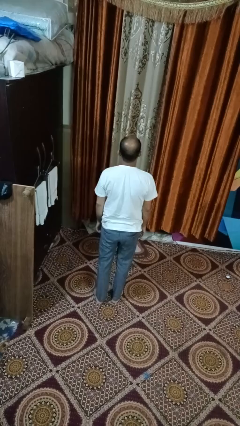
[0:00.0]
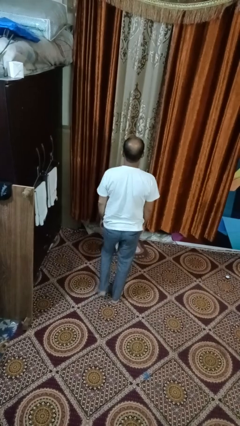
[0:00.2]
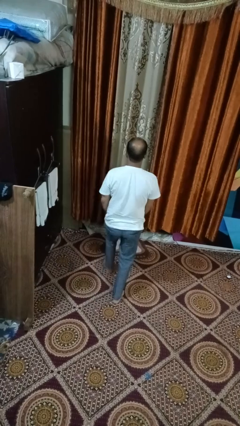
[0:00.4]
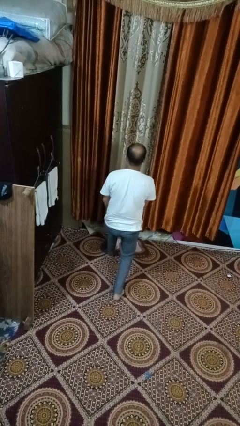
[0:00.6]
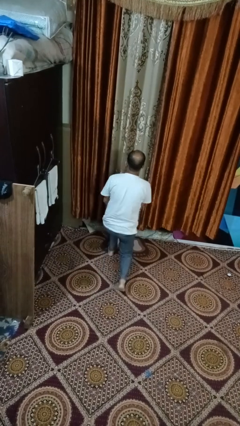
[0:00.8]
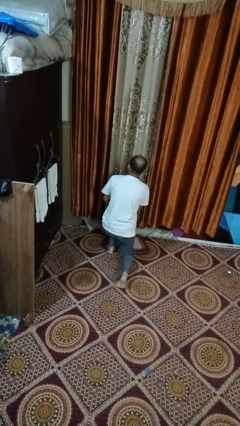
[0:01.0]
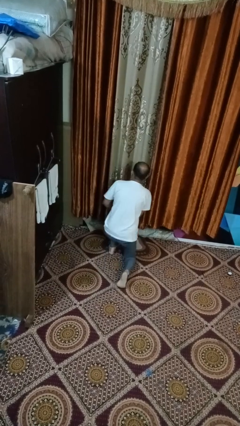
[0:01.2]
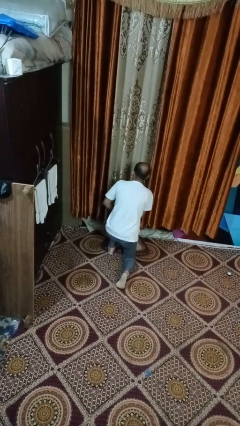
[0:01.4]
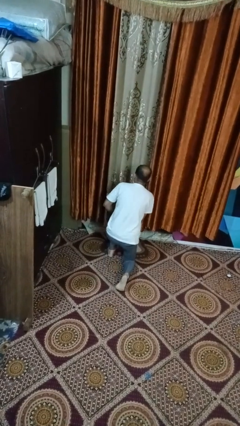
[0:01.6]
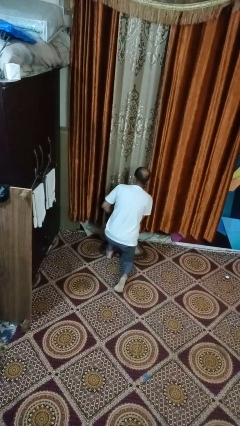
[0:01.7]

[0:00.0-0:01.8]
person kneels

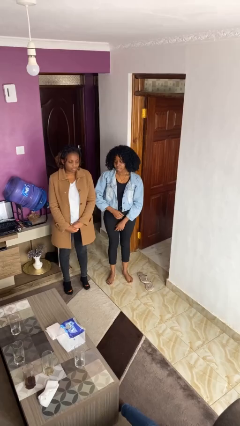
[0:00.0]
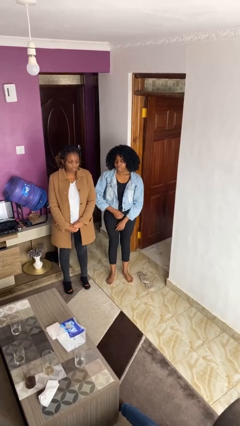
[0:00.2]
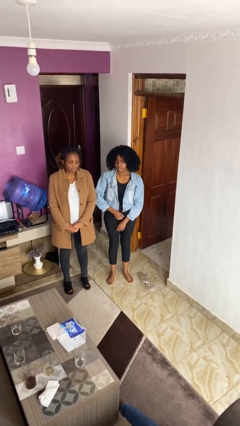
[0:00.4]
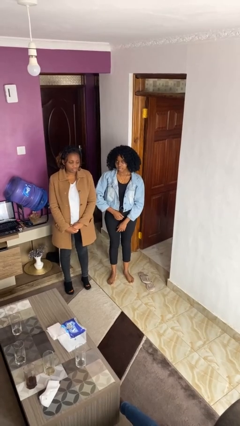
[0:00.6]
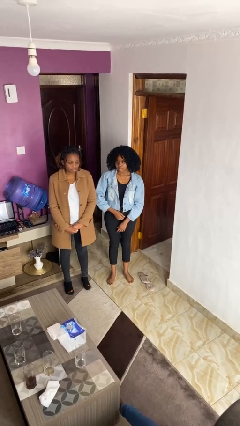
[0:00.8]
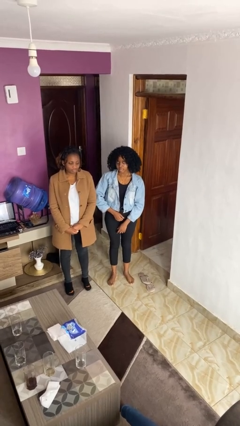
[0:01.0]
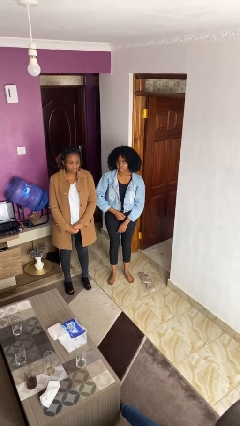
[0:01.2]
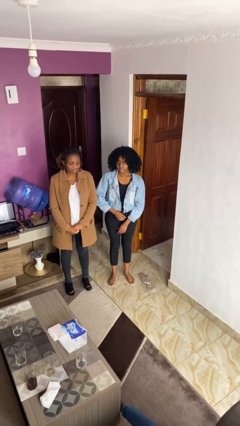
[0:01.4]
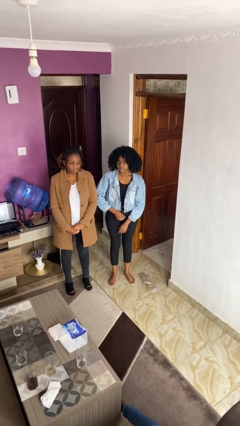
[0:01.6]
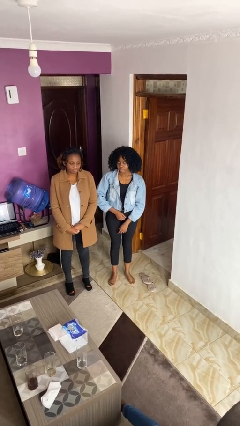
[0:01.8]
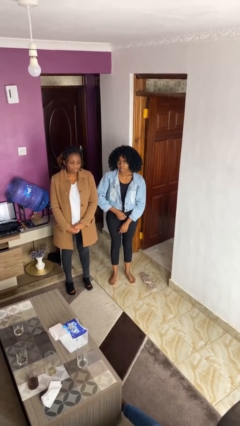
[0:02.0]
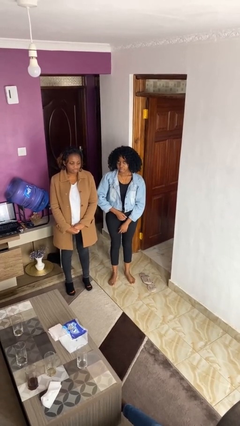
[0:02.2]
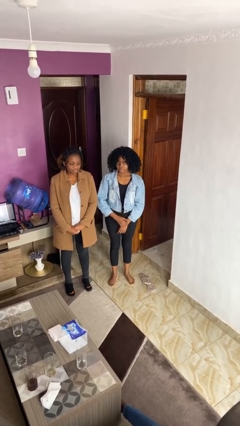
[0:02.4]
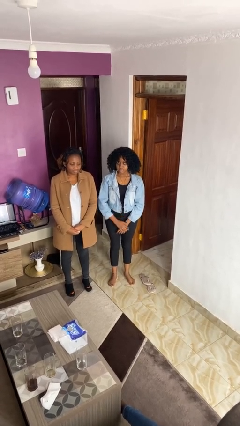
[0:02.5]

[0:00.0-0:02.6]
person nudges person with elbow

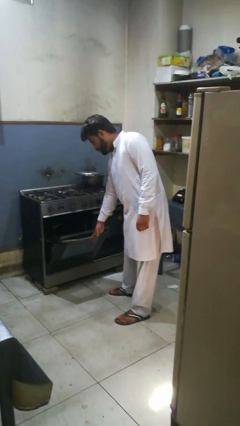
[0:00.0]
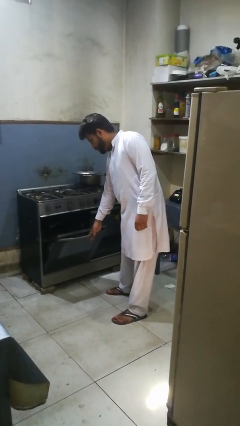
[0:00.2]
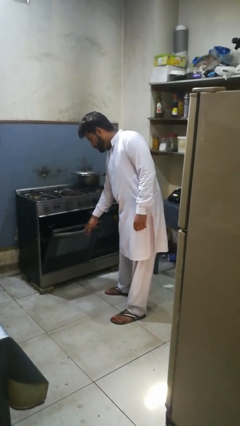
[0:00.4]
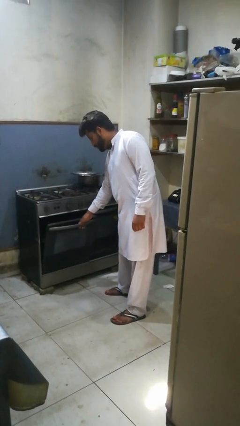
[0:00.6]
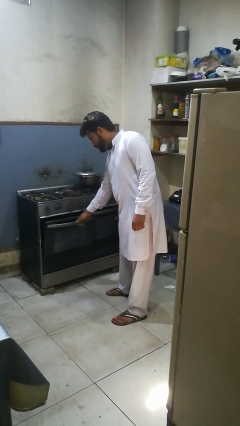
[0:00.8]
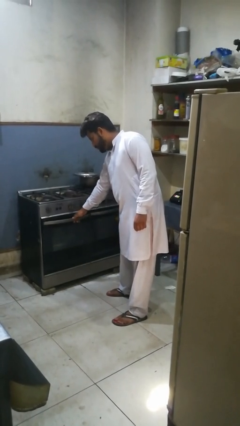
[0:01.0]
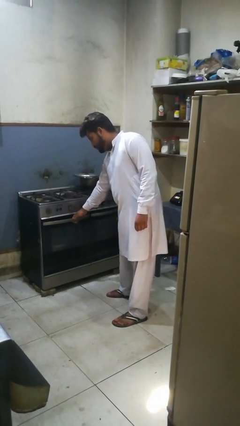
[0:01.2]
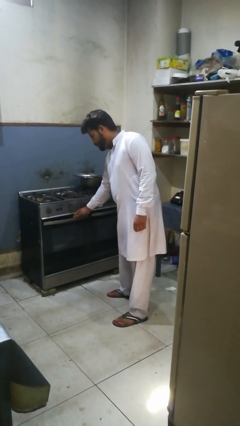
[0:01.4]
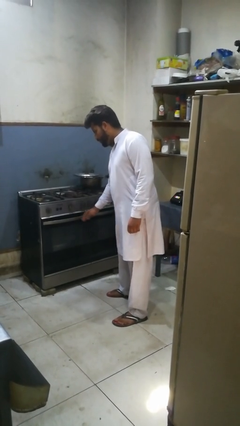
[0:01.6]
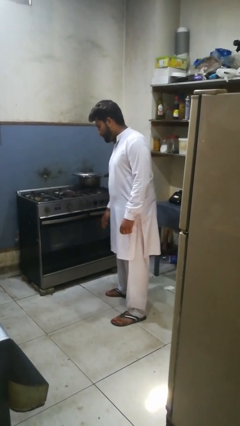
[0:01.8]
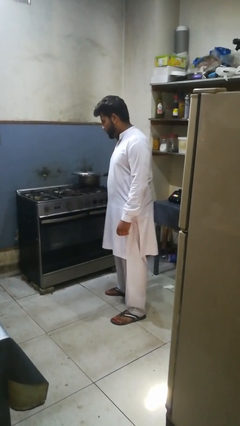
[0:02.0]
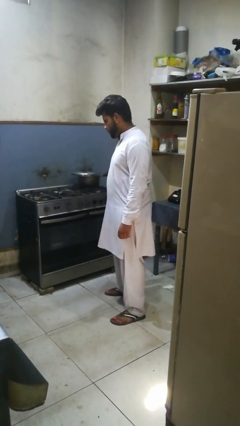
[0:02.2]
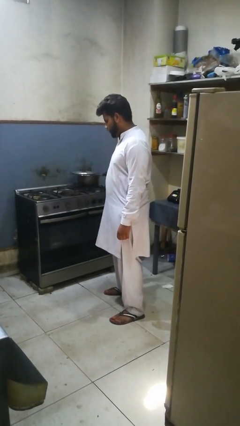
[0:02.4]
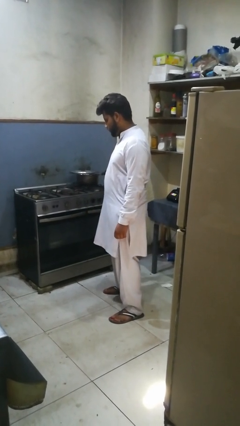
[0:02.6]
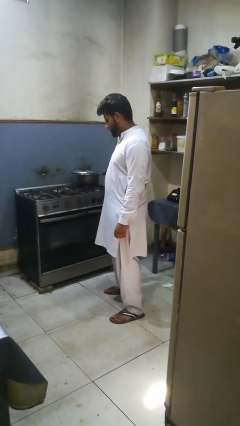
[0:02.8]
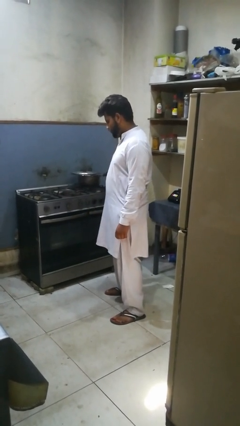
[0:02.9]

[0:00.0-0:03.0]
person closes oven door

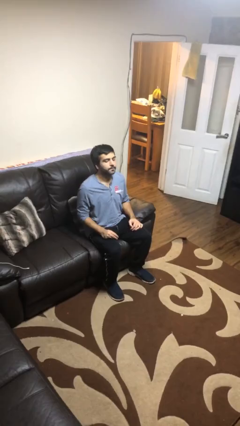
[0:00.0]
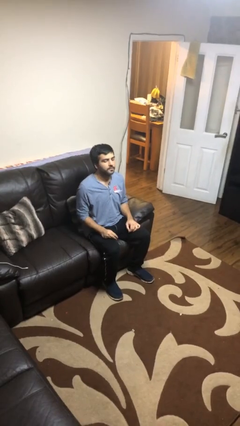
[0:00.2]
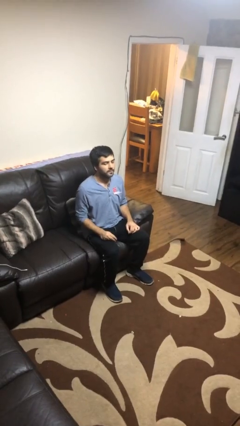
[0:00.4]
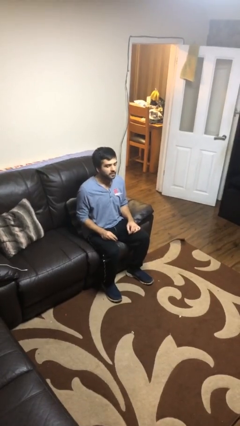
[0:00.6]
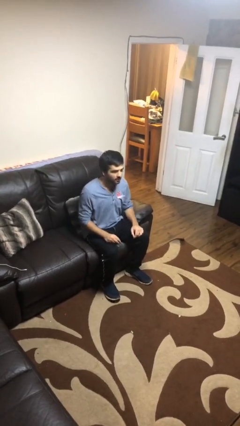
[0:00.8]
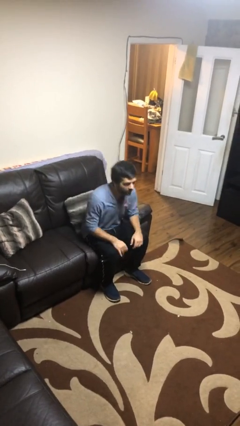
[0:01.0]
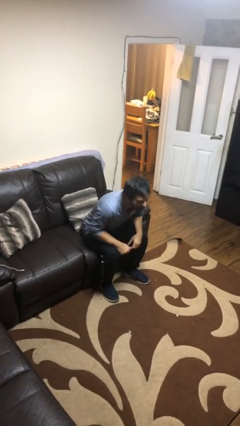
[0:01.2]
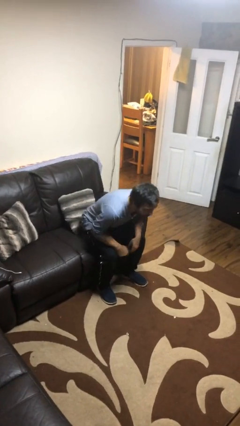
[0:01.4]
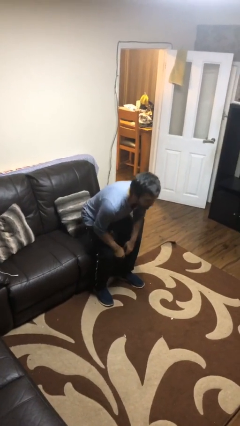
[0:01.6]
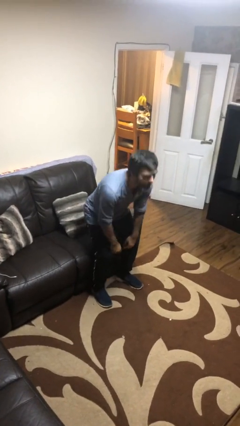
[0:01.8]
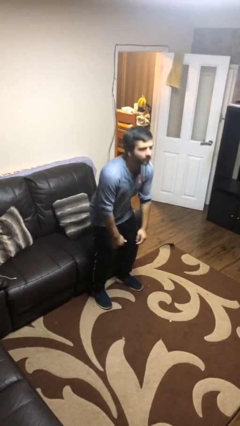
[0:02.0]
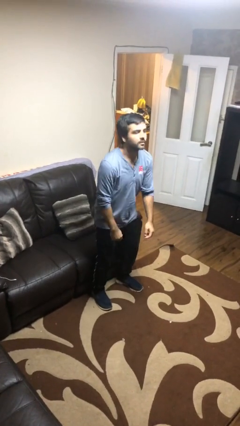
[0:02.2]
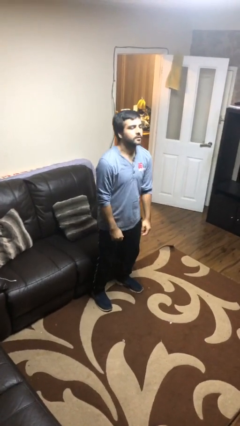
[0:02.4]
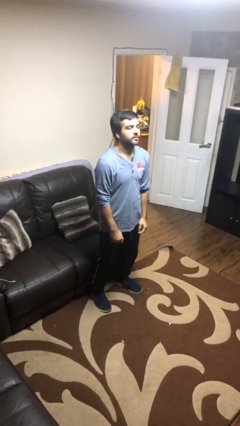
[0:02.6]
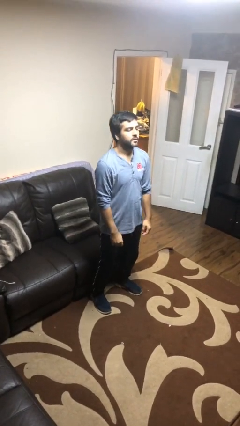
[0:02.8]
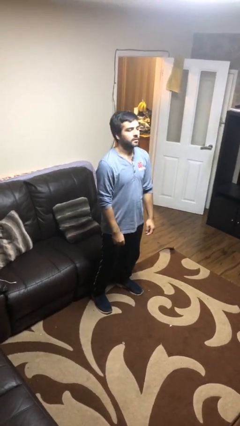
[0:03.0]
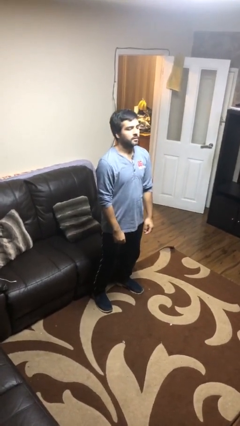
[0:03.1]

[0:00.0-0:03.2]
person stands up

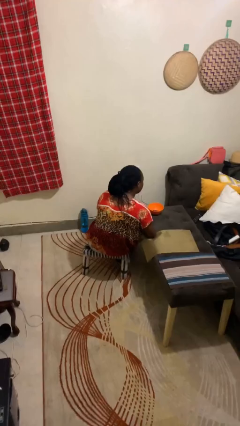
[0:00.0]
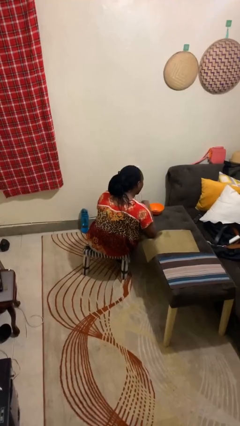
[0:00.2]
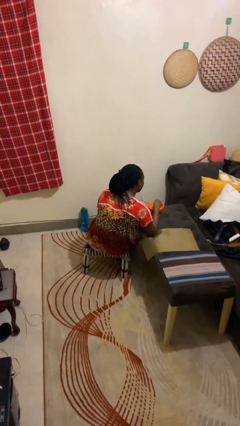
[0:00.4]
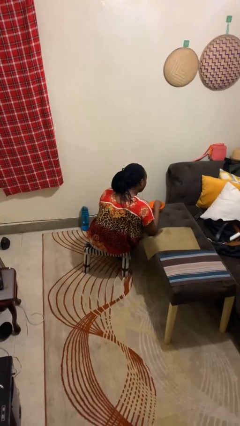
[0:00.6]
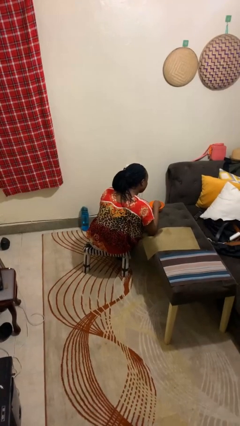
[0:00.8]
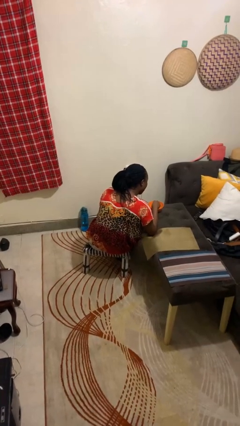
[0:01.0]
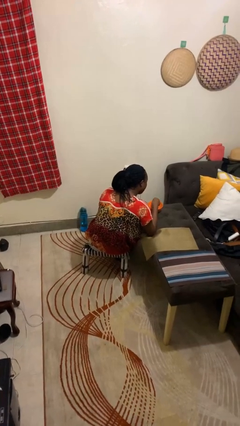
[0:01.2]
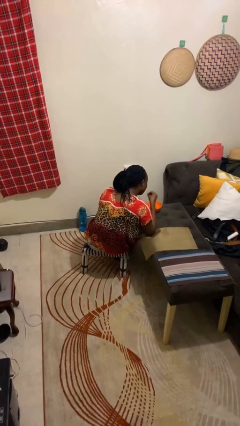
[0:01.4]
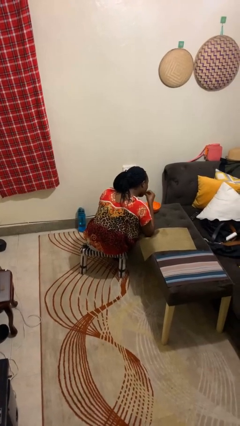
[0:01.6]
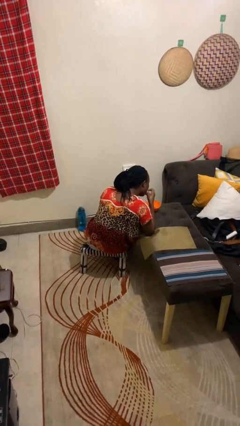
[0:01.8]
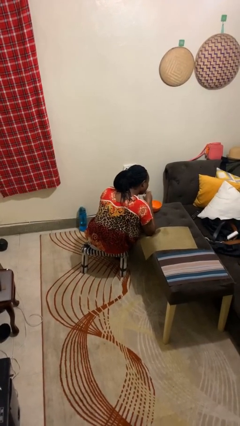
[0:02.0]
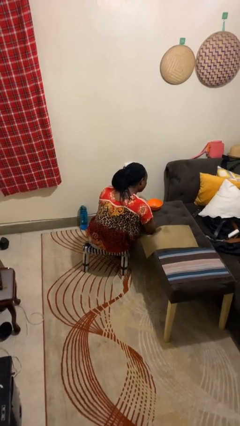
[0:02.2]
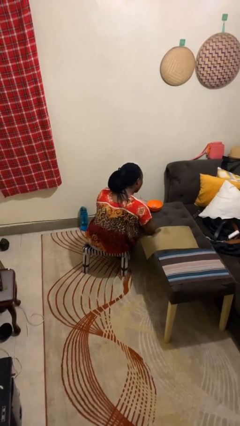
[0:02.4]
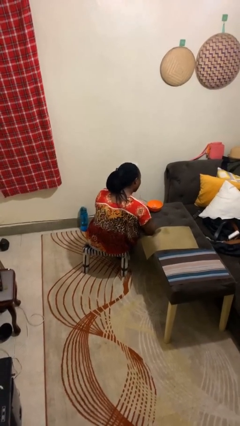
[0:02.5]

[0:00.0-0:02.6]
person eats with hands

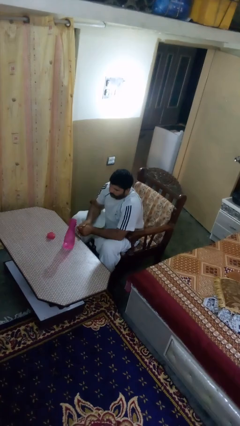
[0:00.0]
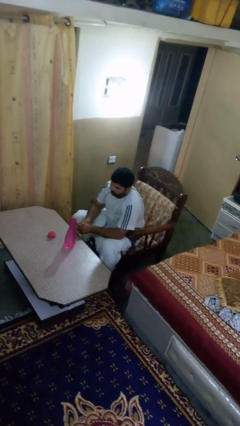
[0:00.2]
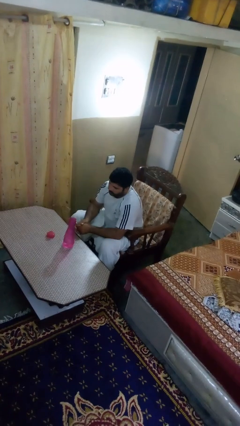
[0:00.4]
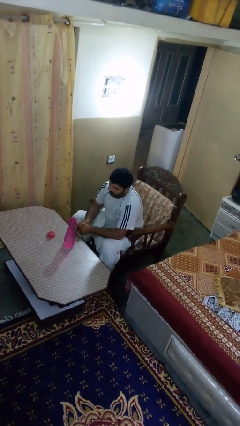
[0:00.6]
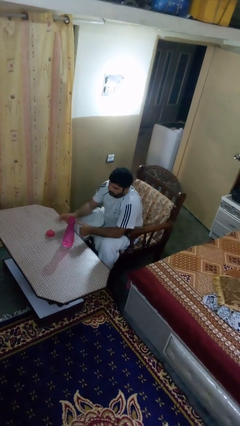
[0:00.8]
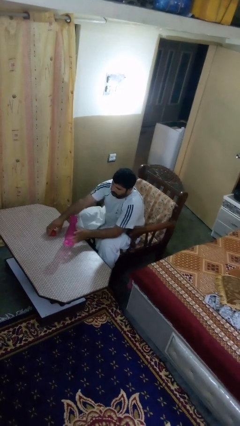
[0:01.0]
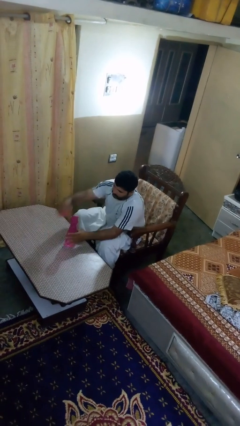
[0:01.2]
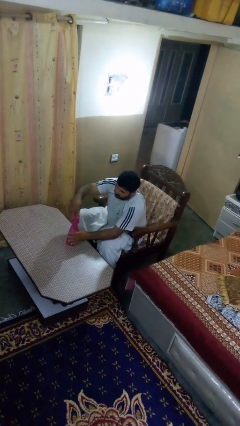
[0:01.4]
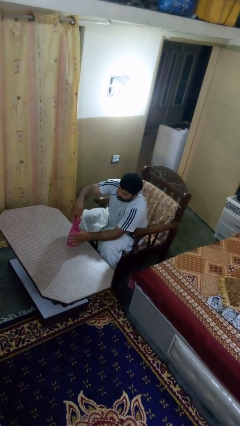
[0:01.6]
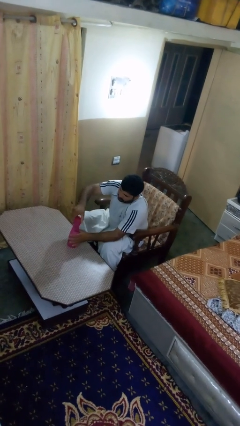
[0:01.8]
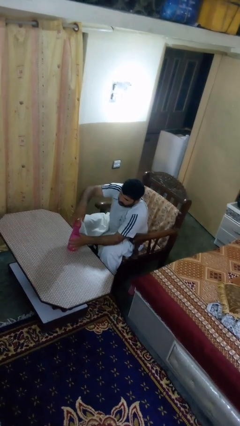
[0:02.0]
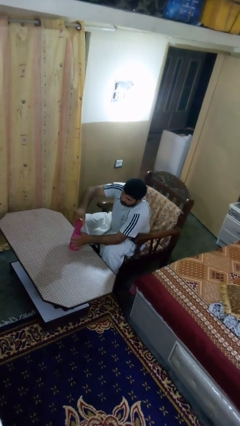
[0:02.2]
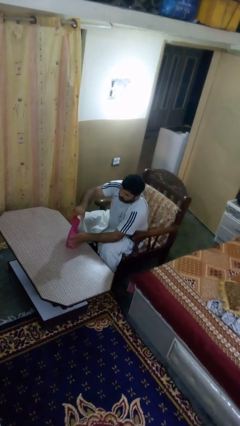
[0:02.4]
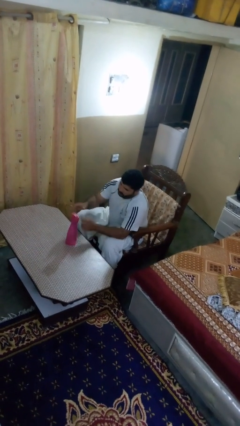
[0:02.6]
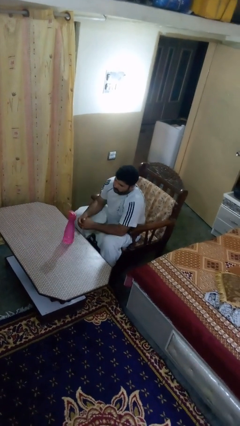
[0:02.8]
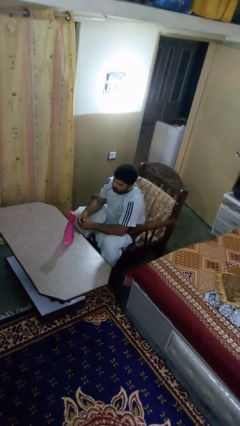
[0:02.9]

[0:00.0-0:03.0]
person screws lid to bottle

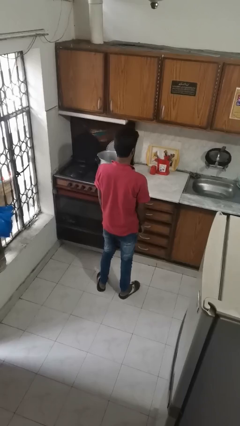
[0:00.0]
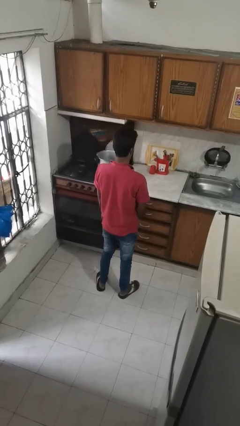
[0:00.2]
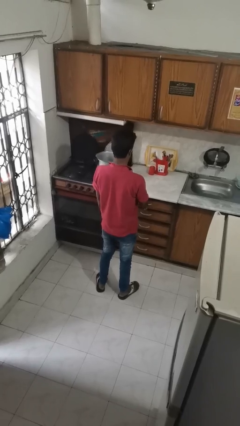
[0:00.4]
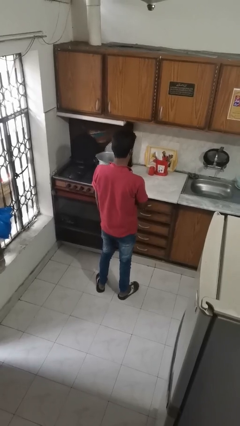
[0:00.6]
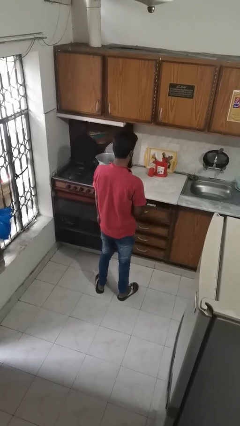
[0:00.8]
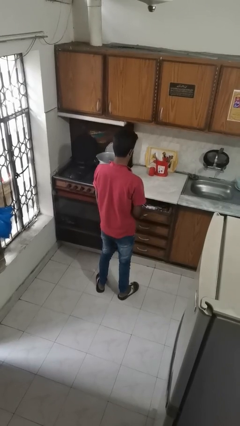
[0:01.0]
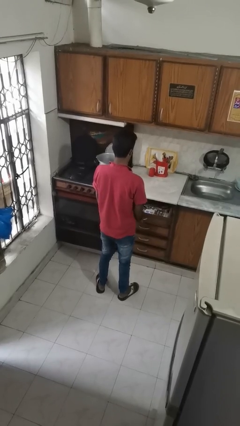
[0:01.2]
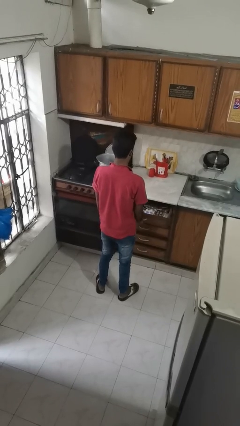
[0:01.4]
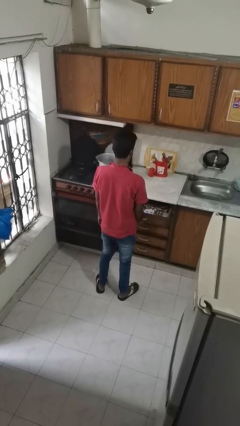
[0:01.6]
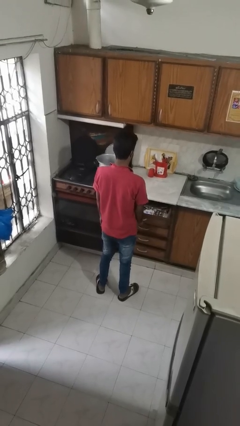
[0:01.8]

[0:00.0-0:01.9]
person opens kitchen drawer
